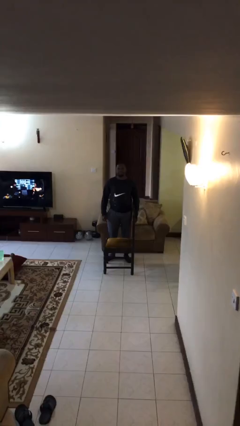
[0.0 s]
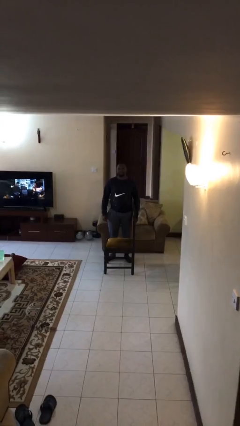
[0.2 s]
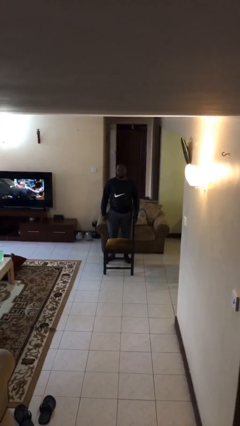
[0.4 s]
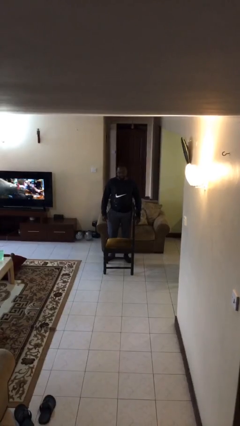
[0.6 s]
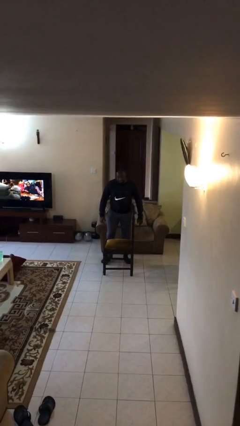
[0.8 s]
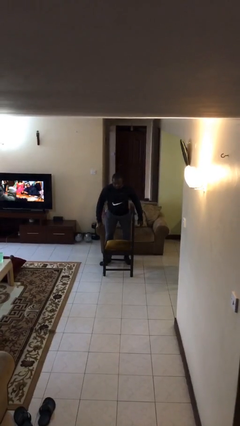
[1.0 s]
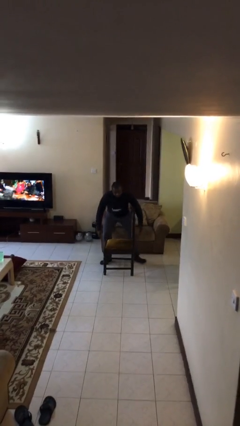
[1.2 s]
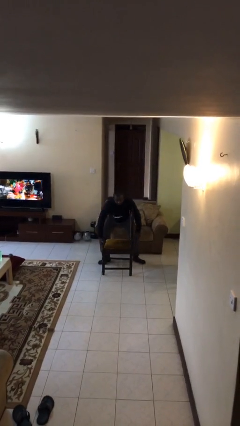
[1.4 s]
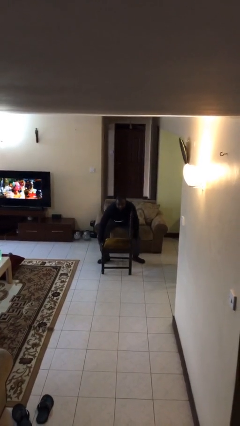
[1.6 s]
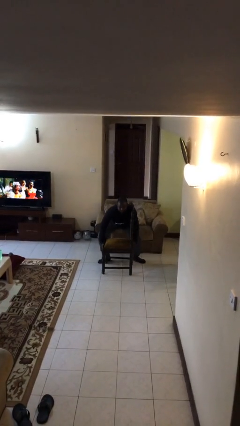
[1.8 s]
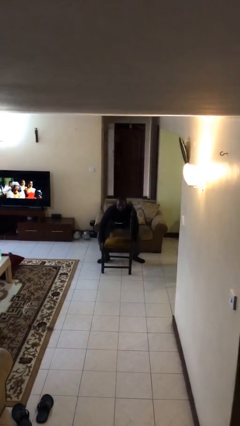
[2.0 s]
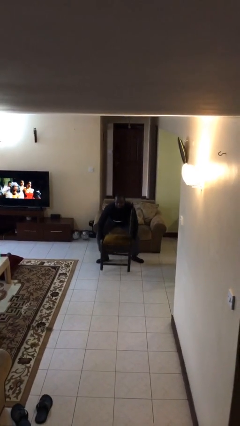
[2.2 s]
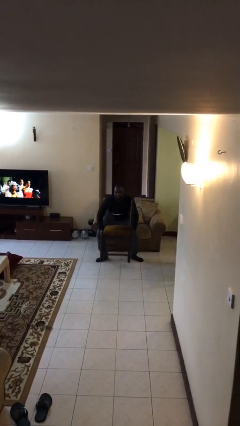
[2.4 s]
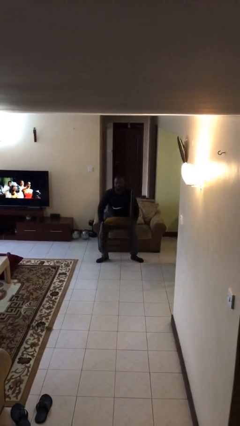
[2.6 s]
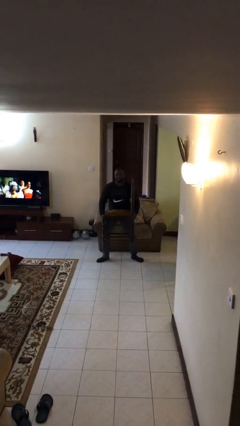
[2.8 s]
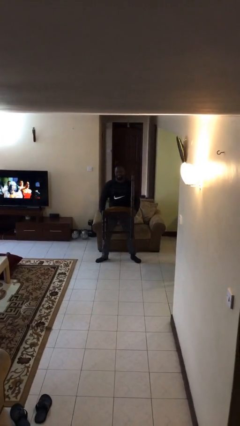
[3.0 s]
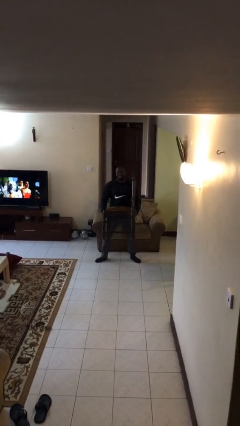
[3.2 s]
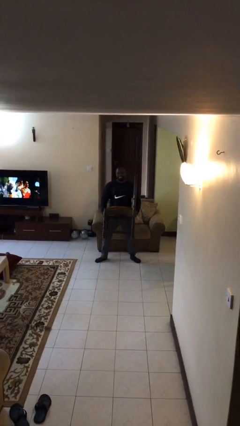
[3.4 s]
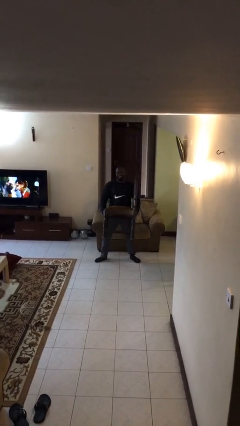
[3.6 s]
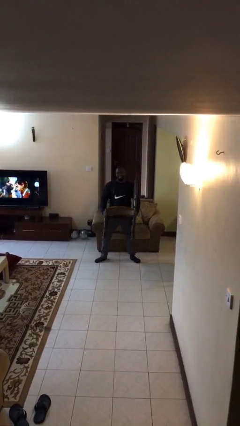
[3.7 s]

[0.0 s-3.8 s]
person picks up object from floor

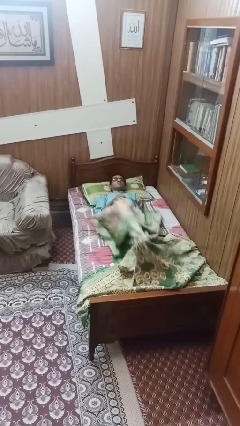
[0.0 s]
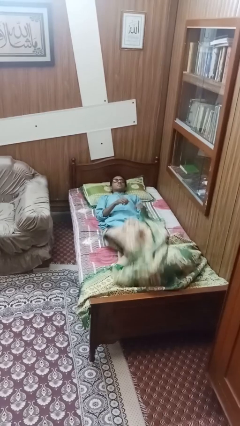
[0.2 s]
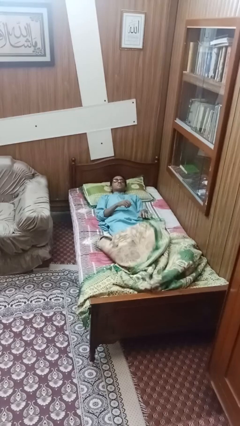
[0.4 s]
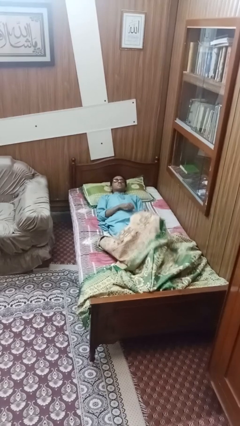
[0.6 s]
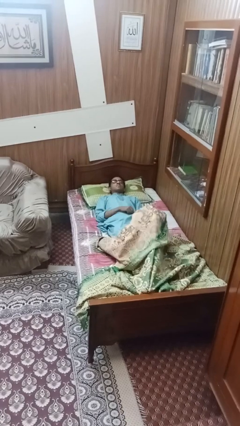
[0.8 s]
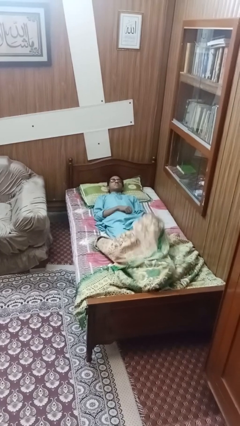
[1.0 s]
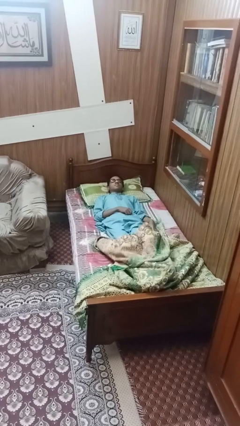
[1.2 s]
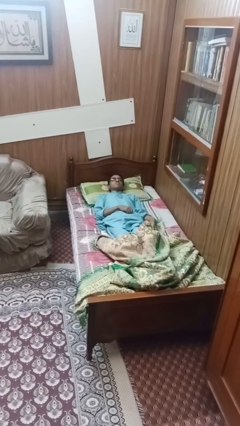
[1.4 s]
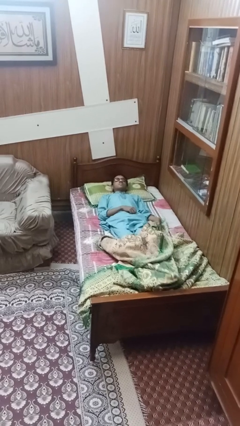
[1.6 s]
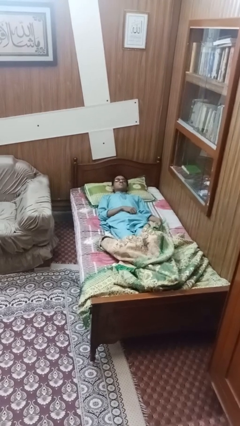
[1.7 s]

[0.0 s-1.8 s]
person uncovers with bedsheets

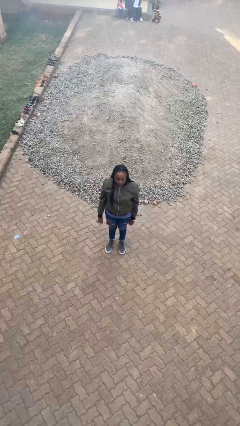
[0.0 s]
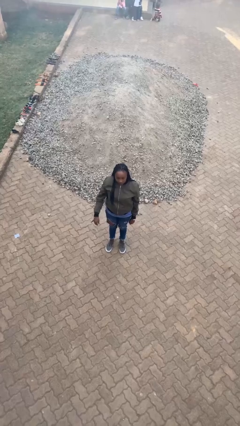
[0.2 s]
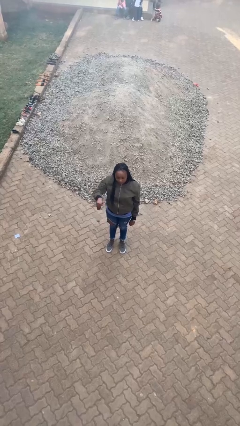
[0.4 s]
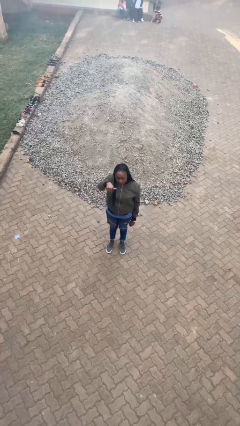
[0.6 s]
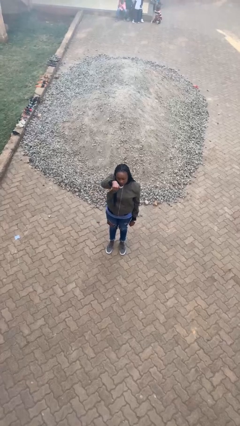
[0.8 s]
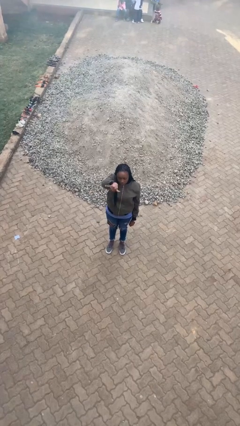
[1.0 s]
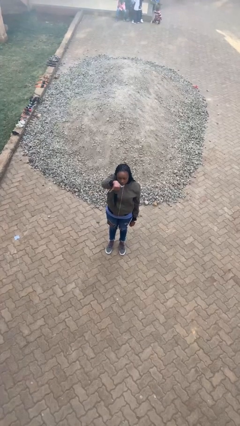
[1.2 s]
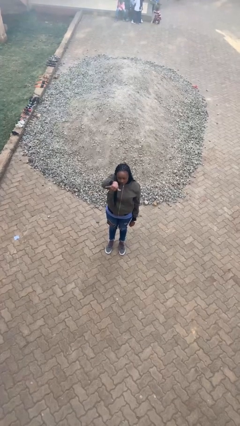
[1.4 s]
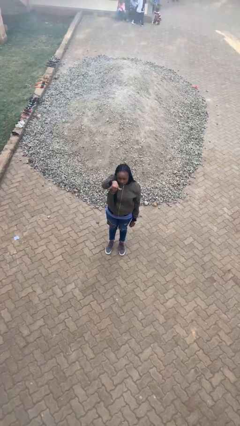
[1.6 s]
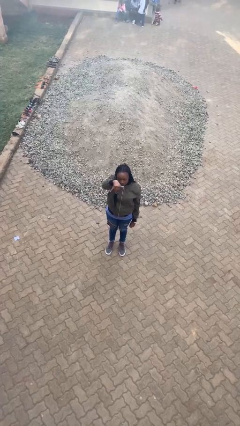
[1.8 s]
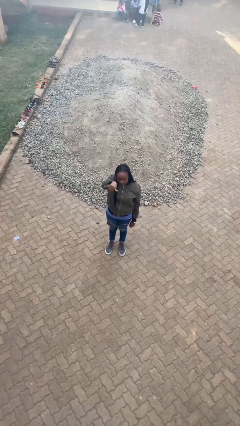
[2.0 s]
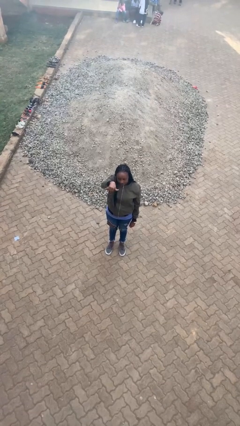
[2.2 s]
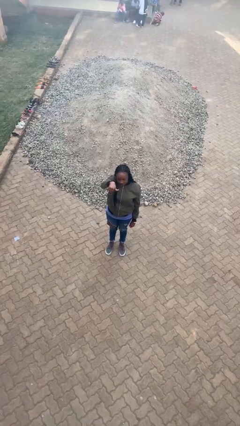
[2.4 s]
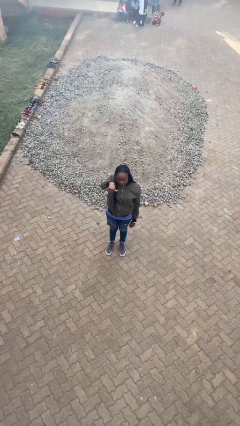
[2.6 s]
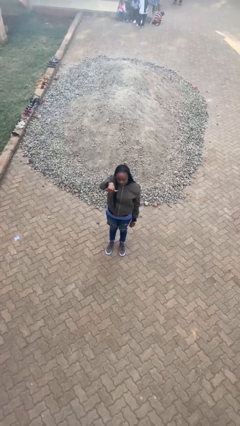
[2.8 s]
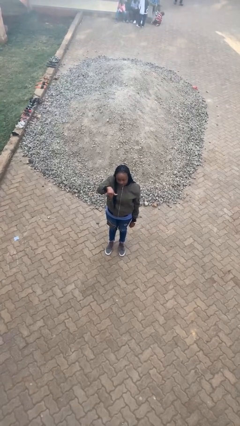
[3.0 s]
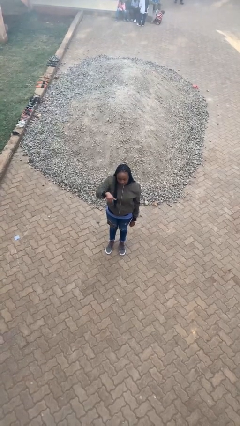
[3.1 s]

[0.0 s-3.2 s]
person gestures hang loose

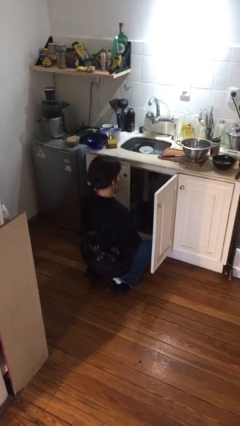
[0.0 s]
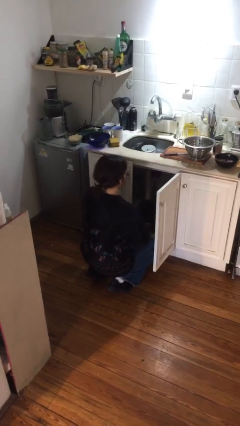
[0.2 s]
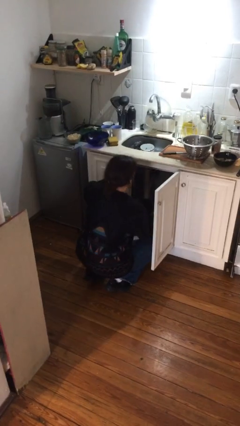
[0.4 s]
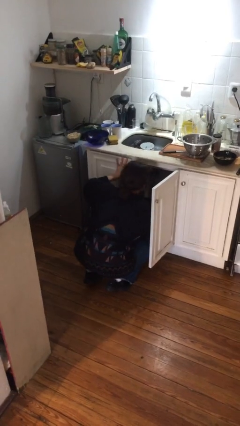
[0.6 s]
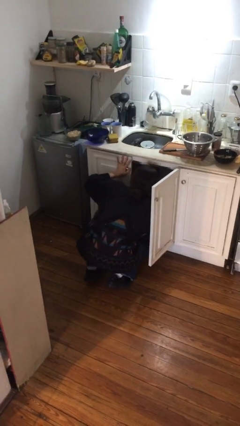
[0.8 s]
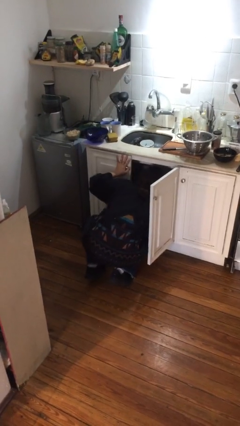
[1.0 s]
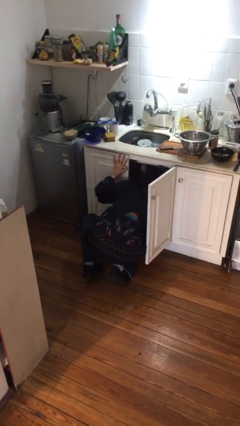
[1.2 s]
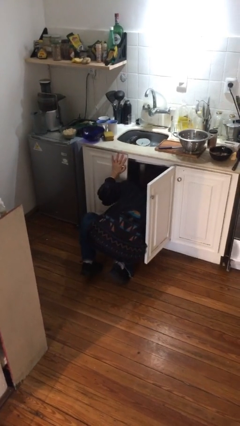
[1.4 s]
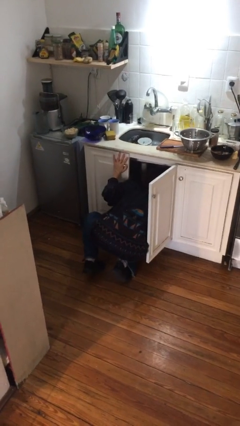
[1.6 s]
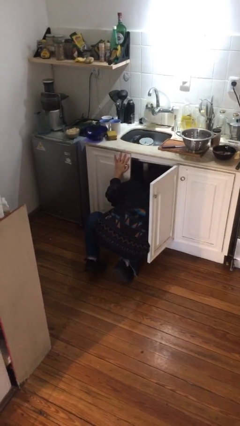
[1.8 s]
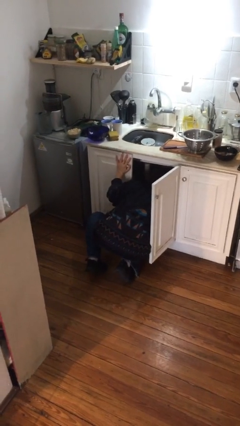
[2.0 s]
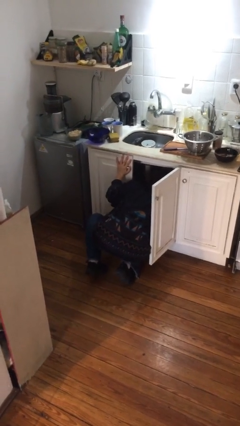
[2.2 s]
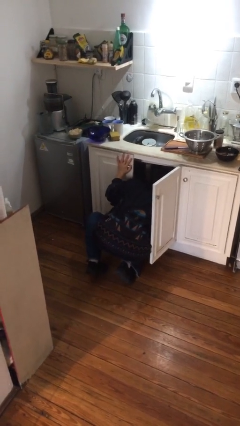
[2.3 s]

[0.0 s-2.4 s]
person searches in cabinet

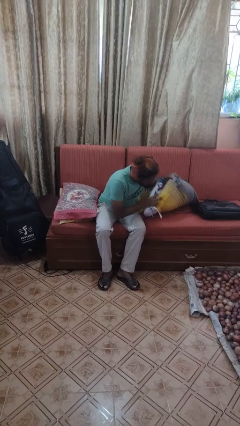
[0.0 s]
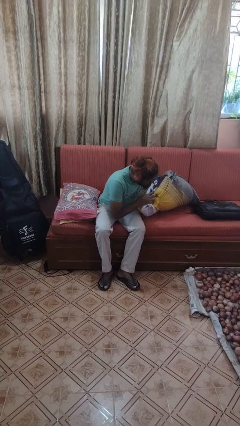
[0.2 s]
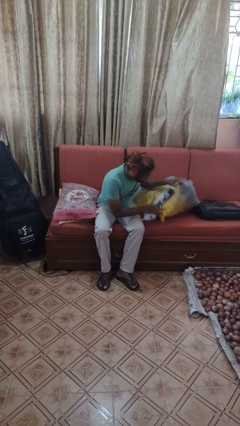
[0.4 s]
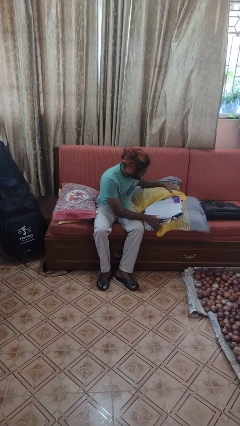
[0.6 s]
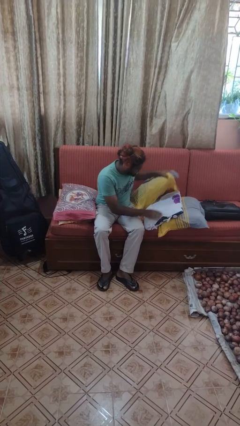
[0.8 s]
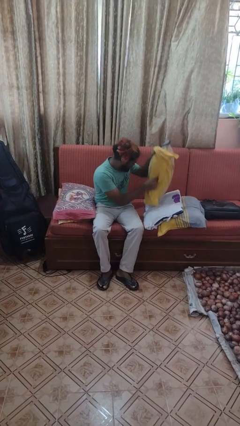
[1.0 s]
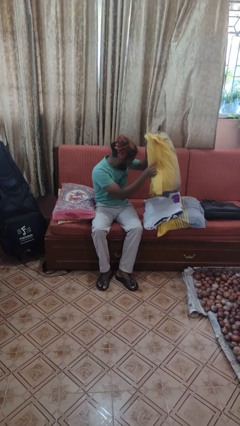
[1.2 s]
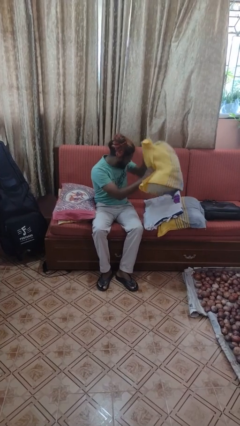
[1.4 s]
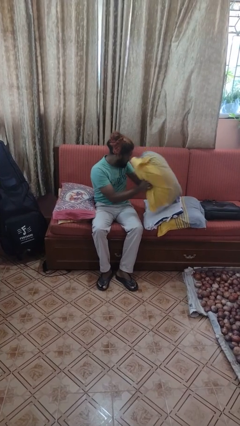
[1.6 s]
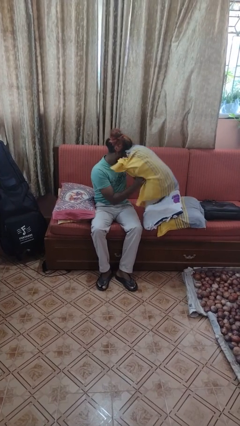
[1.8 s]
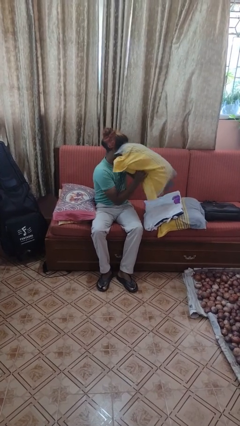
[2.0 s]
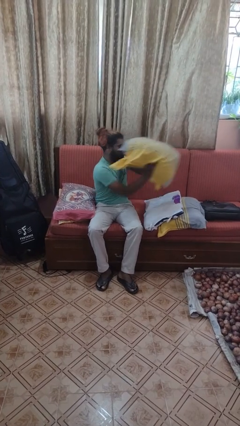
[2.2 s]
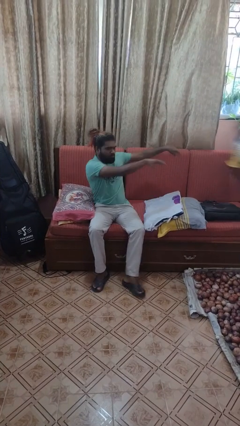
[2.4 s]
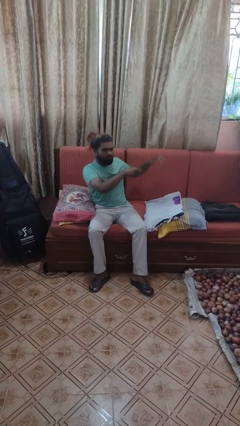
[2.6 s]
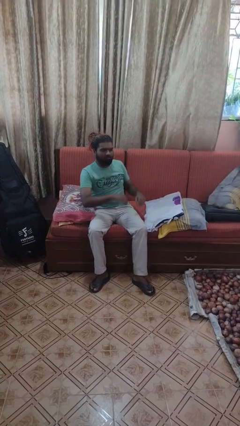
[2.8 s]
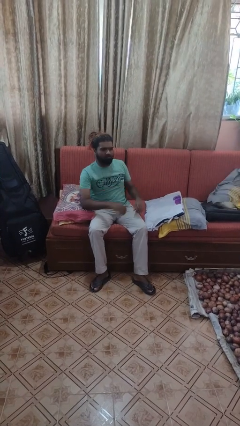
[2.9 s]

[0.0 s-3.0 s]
person searches in couch

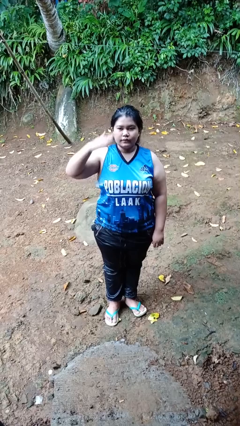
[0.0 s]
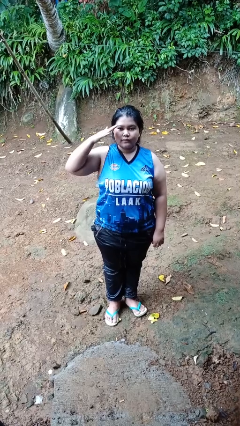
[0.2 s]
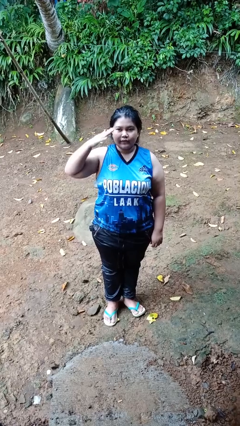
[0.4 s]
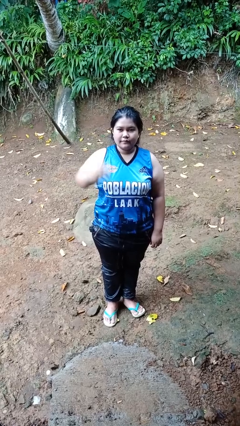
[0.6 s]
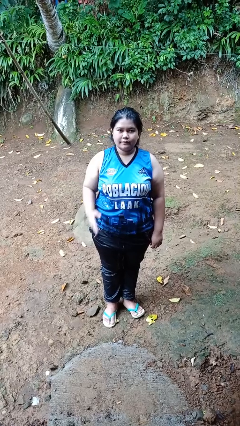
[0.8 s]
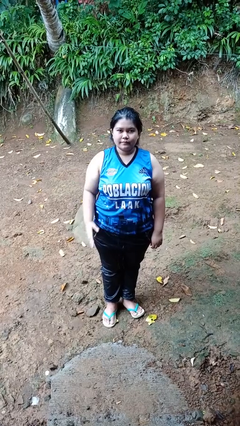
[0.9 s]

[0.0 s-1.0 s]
person salutes

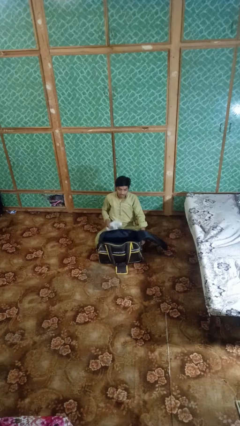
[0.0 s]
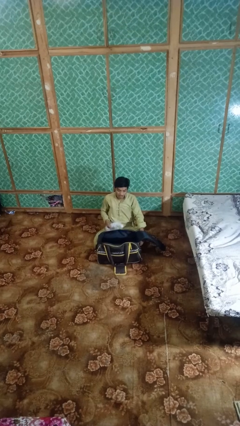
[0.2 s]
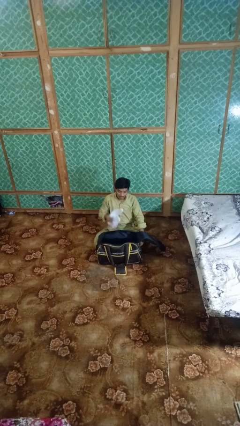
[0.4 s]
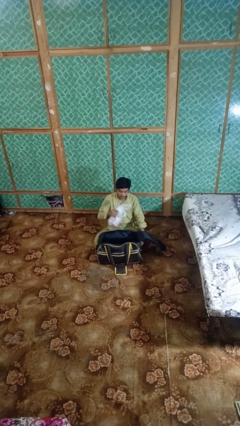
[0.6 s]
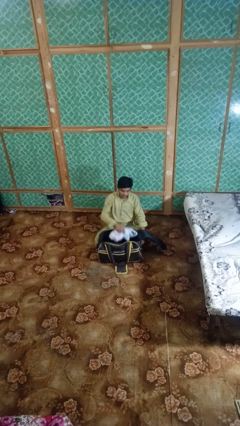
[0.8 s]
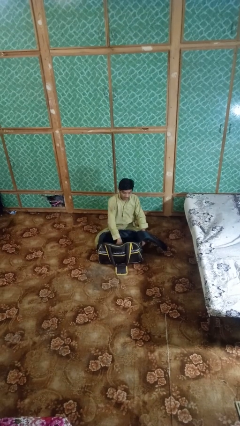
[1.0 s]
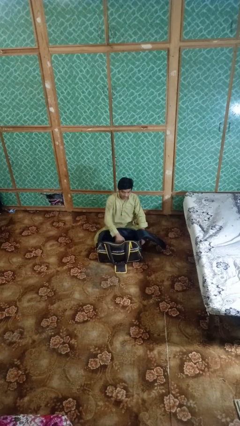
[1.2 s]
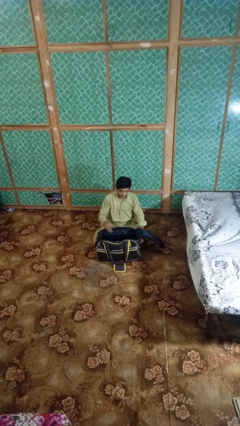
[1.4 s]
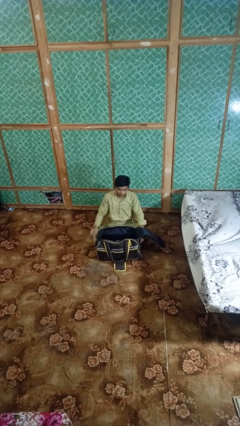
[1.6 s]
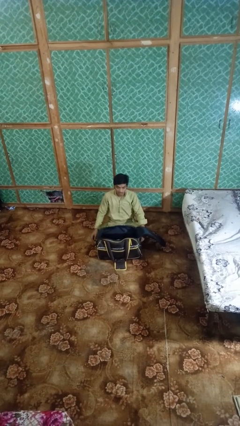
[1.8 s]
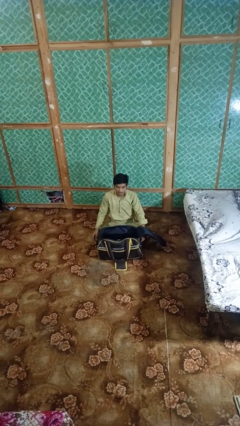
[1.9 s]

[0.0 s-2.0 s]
person puts object into bag
